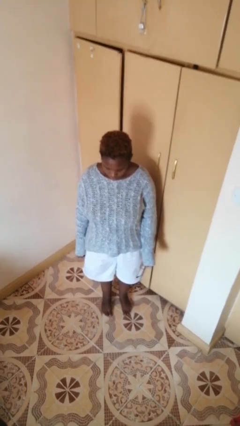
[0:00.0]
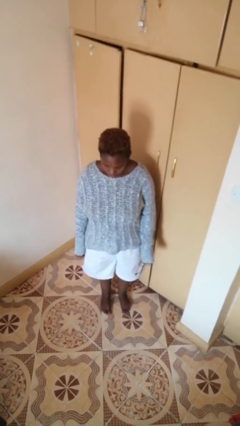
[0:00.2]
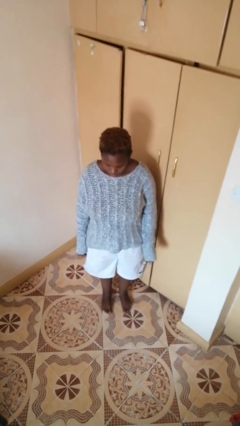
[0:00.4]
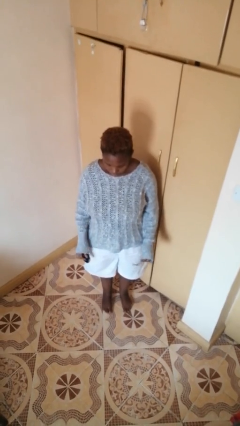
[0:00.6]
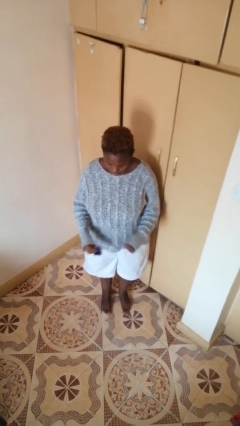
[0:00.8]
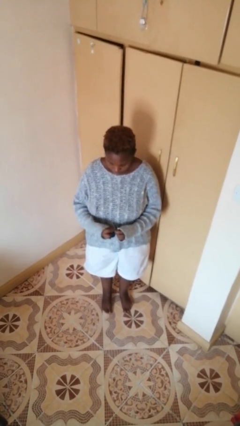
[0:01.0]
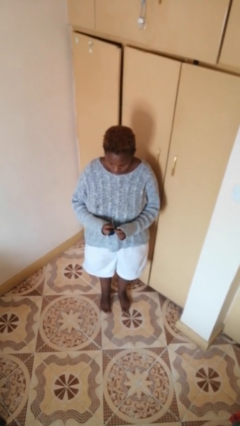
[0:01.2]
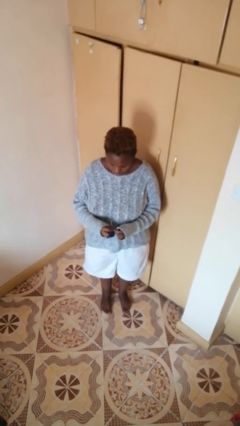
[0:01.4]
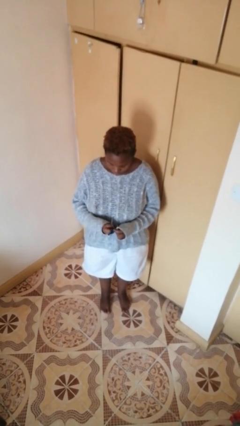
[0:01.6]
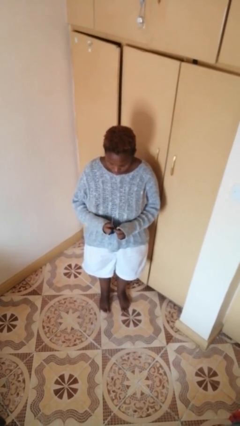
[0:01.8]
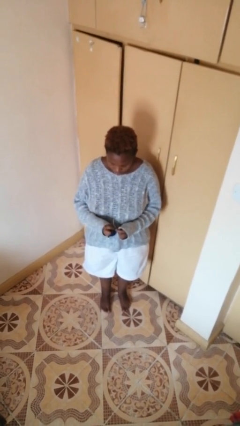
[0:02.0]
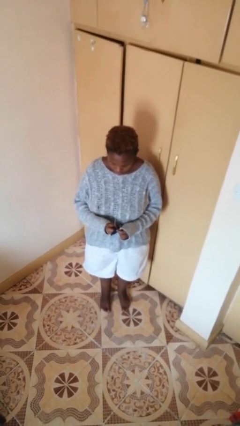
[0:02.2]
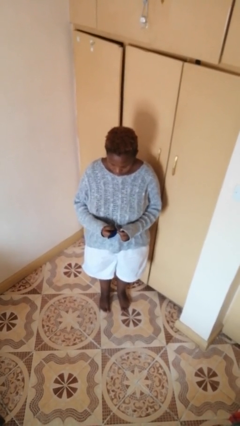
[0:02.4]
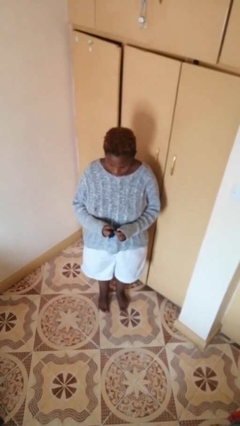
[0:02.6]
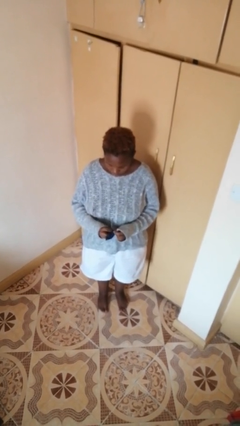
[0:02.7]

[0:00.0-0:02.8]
person cleans eyeglasses

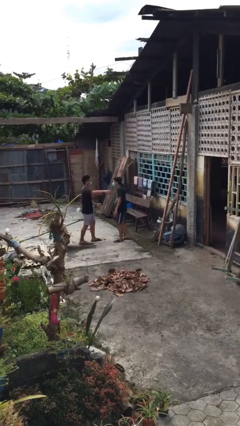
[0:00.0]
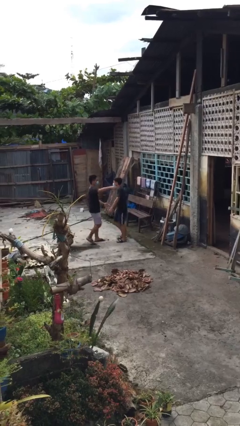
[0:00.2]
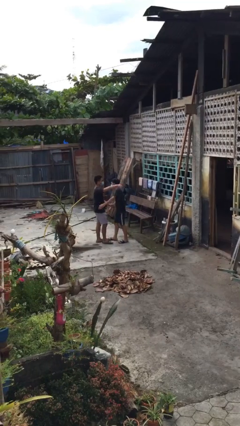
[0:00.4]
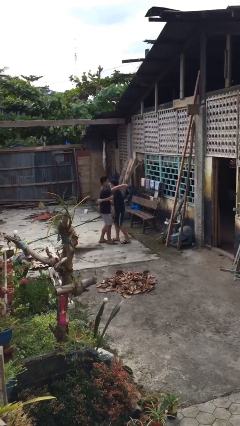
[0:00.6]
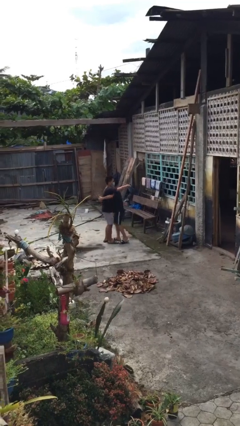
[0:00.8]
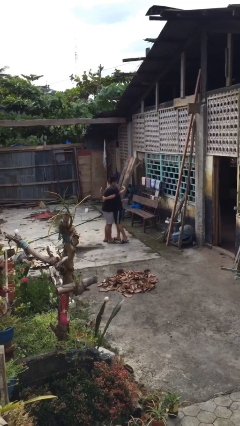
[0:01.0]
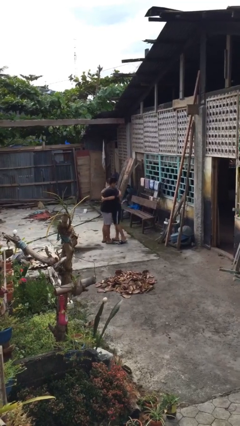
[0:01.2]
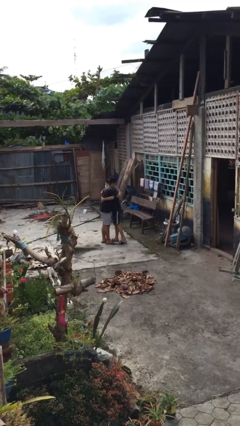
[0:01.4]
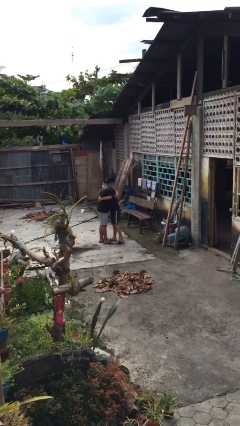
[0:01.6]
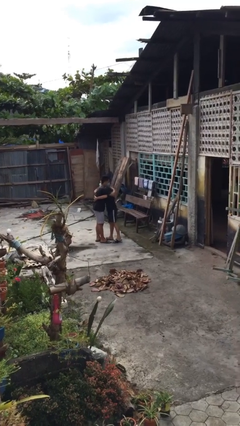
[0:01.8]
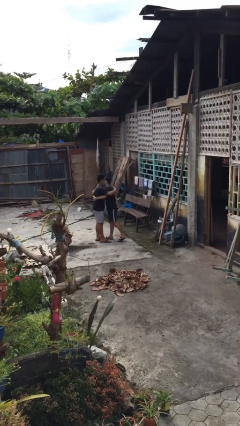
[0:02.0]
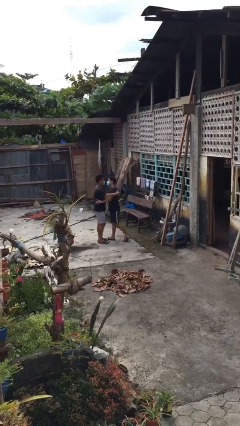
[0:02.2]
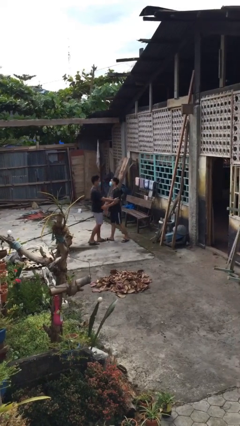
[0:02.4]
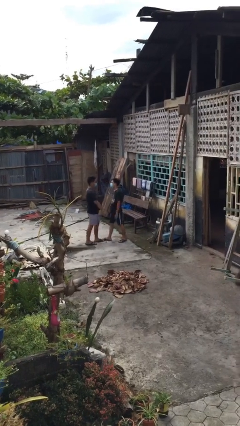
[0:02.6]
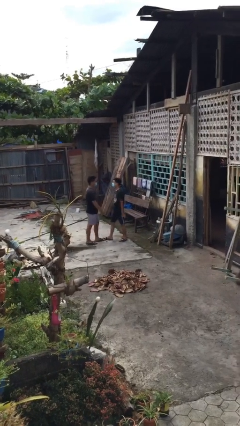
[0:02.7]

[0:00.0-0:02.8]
person embraces person

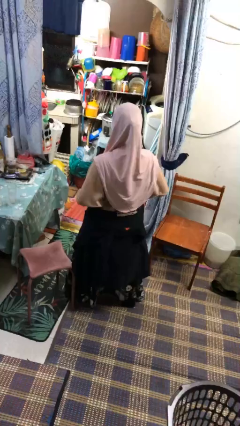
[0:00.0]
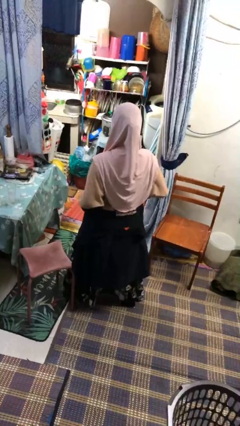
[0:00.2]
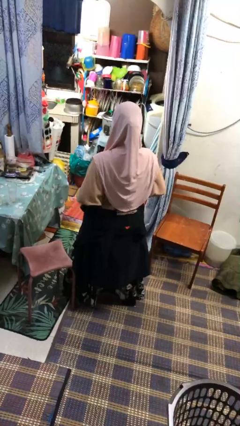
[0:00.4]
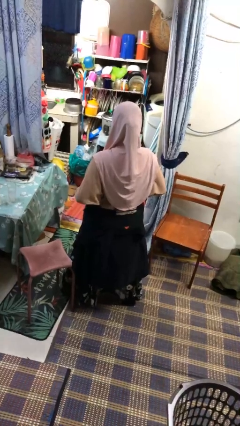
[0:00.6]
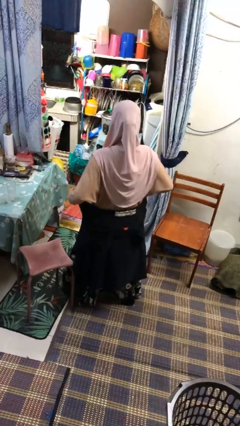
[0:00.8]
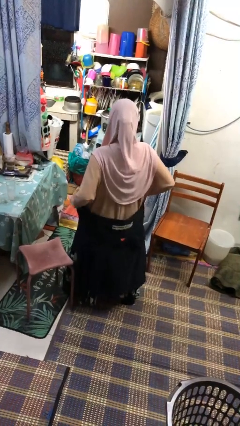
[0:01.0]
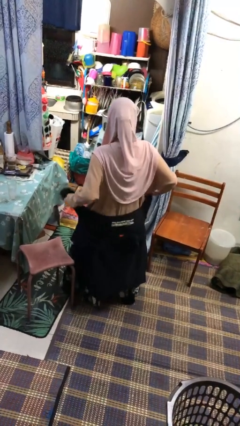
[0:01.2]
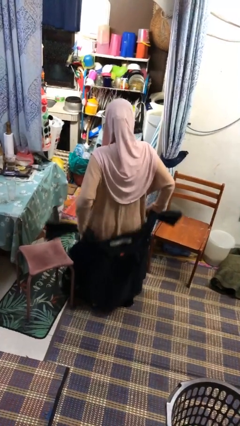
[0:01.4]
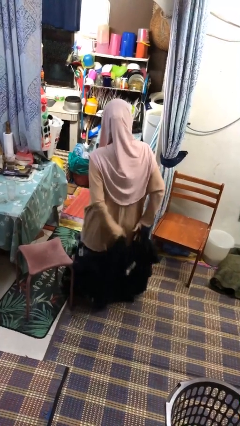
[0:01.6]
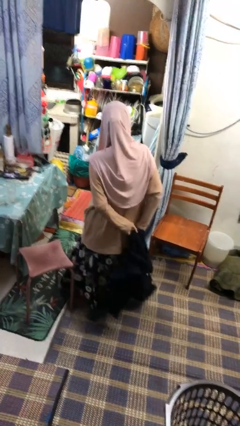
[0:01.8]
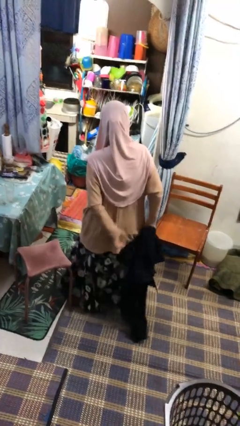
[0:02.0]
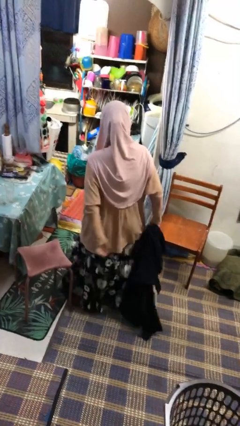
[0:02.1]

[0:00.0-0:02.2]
person unties jacket around waist

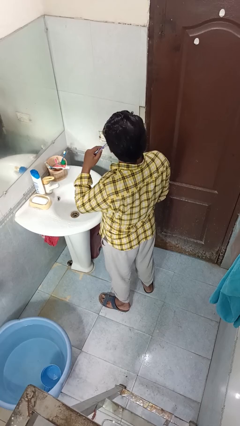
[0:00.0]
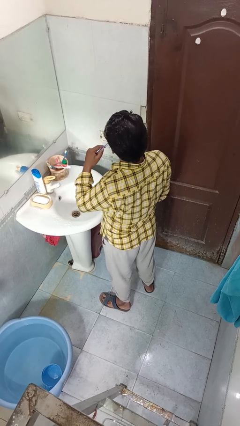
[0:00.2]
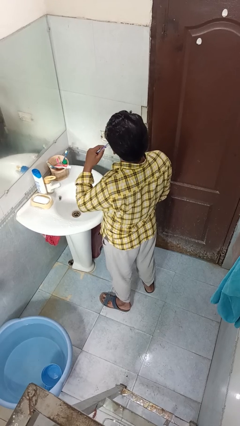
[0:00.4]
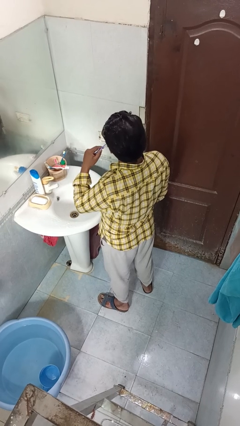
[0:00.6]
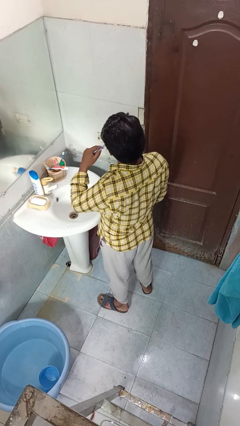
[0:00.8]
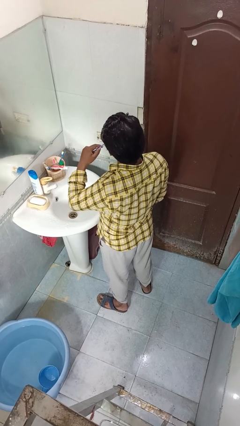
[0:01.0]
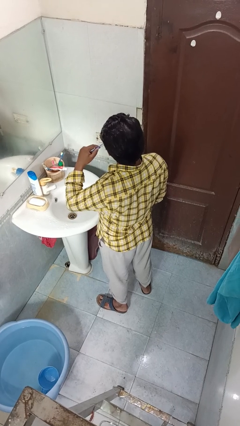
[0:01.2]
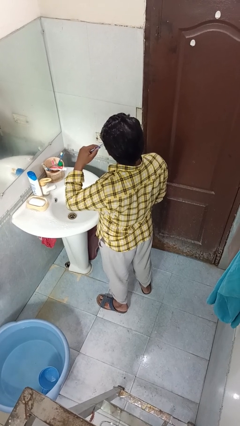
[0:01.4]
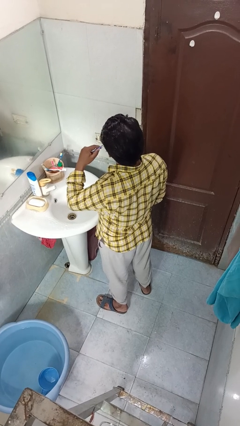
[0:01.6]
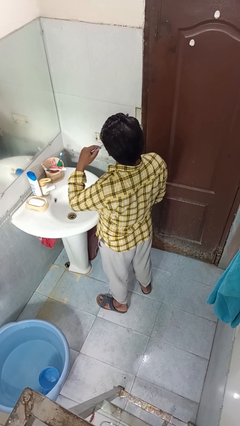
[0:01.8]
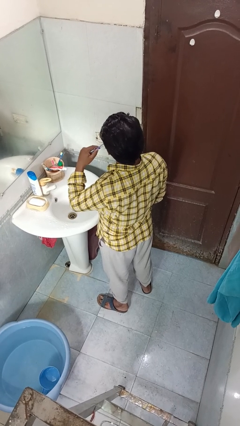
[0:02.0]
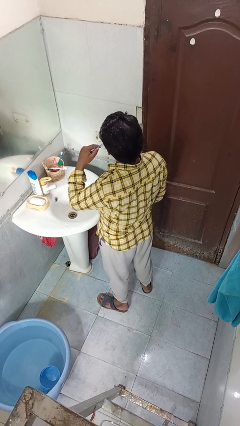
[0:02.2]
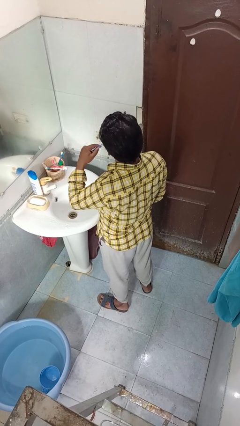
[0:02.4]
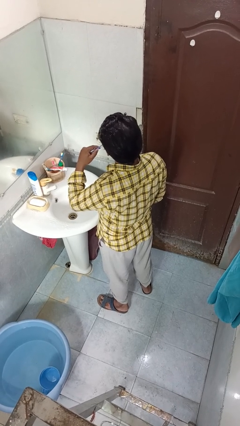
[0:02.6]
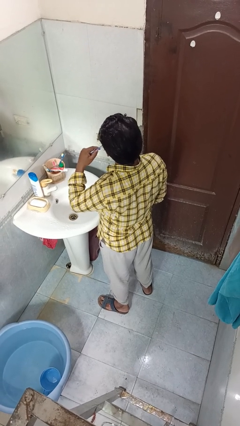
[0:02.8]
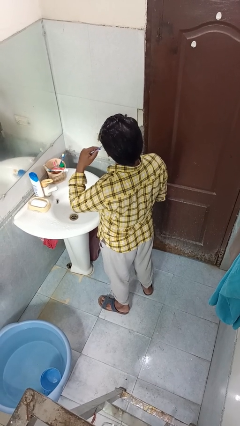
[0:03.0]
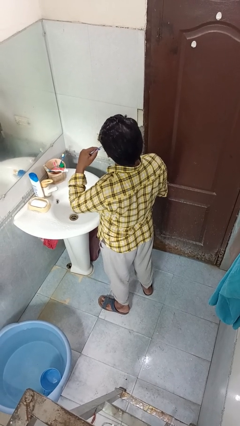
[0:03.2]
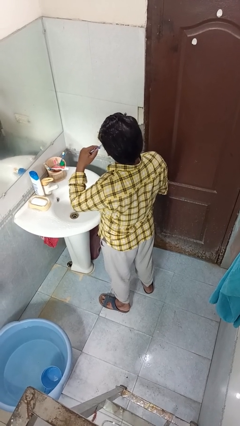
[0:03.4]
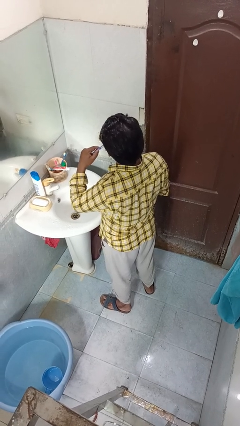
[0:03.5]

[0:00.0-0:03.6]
person brushes teeth

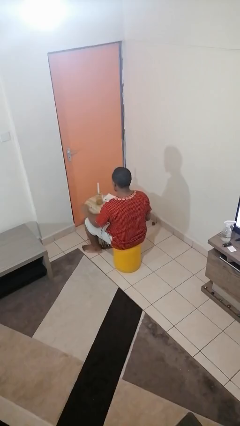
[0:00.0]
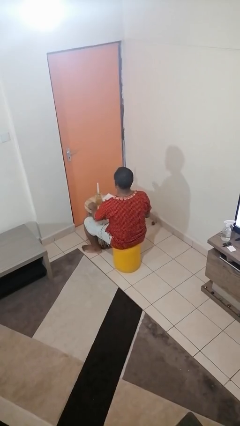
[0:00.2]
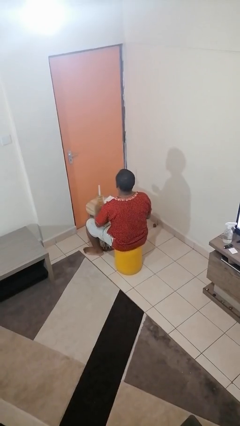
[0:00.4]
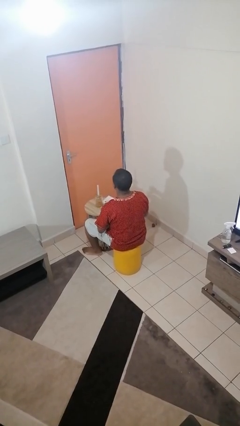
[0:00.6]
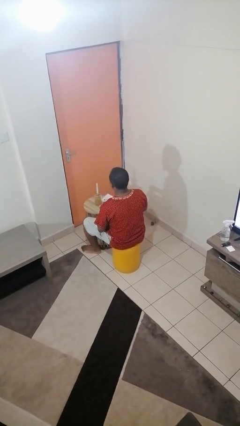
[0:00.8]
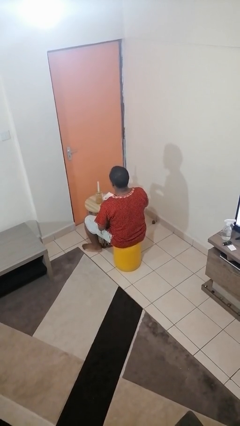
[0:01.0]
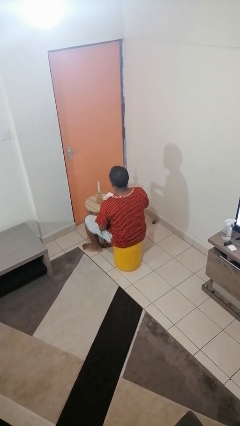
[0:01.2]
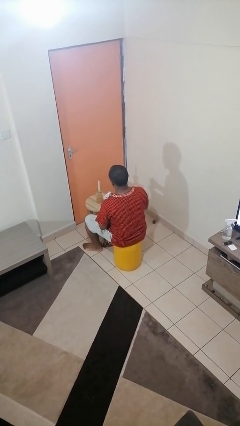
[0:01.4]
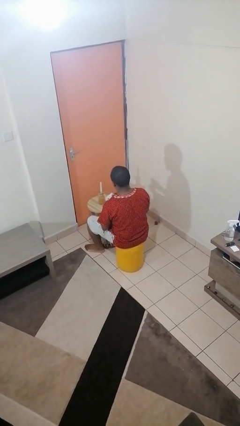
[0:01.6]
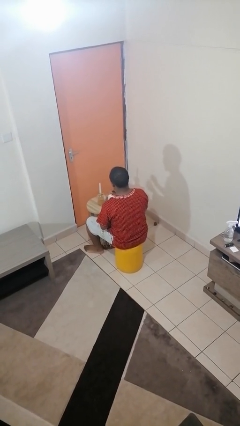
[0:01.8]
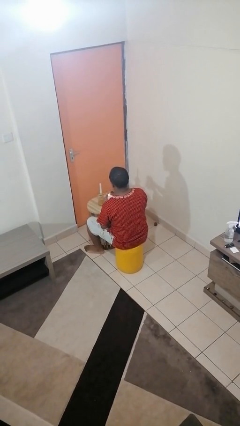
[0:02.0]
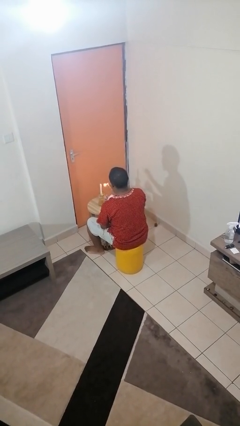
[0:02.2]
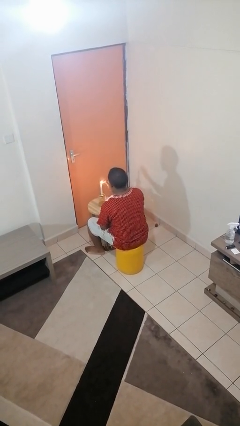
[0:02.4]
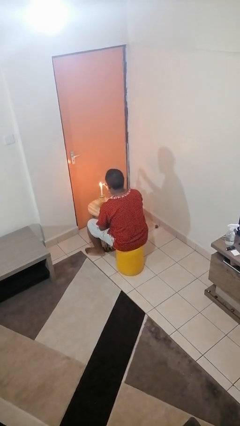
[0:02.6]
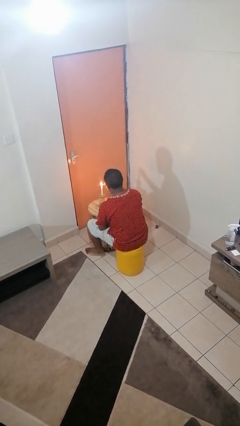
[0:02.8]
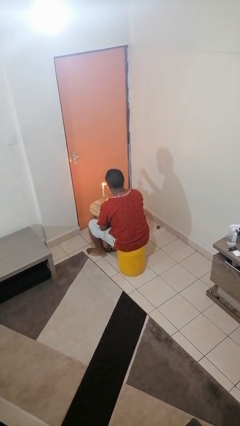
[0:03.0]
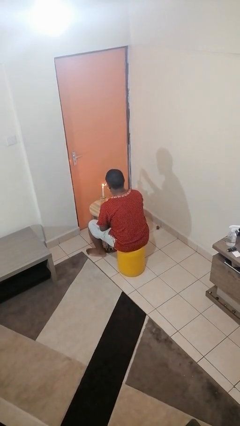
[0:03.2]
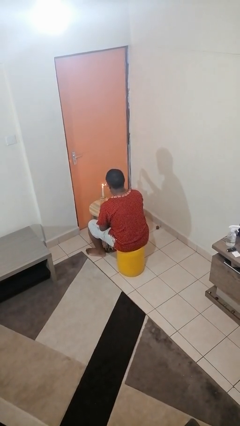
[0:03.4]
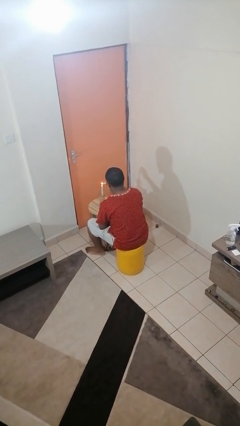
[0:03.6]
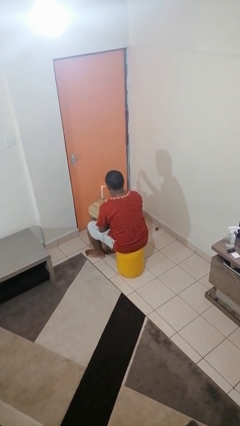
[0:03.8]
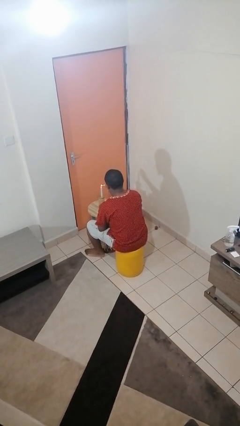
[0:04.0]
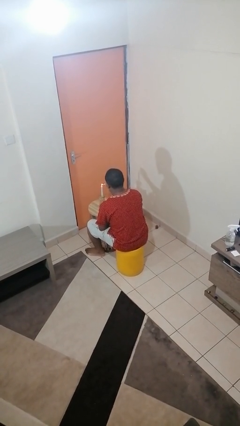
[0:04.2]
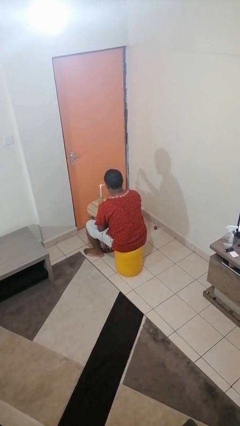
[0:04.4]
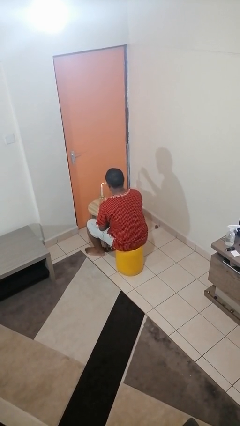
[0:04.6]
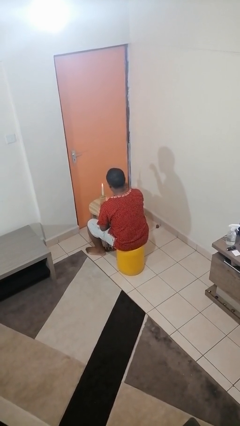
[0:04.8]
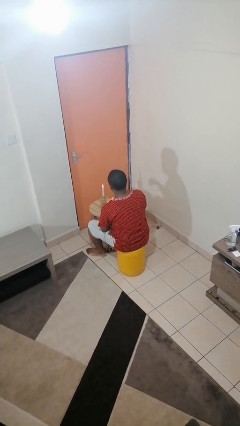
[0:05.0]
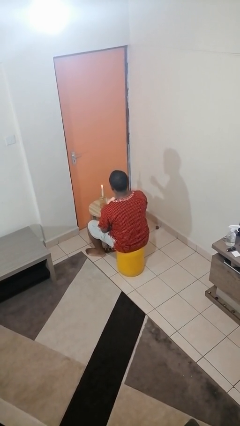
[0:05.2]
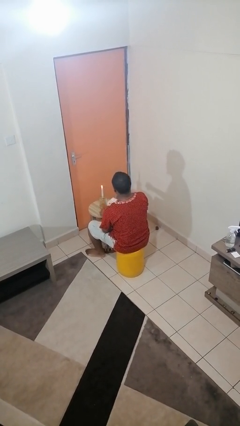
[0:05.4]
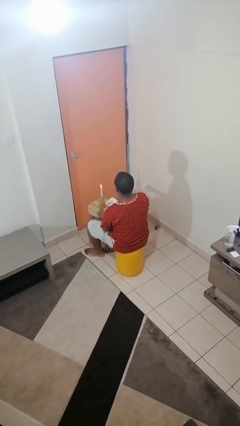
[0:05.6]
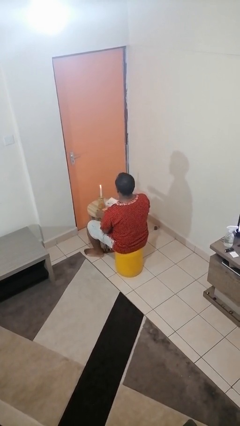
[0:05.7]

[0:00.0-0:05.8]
person lights candle
